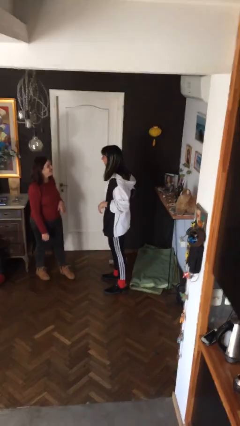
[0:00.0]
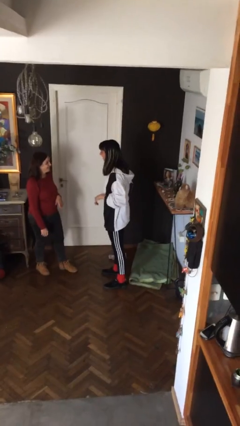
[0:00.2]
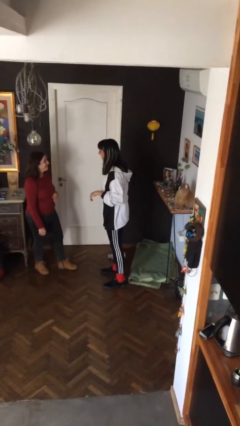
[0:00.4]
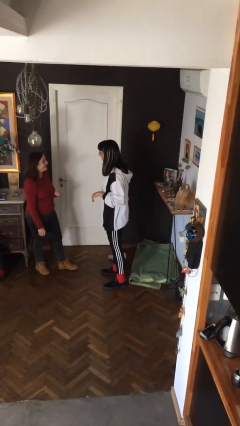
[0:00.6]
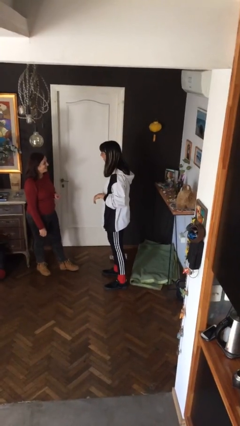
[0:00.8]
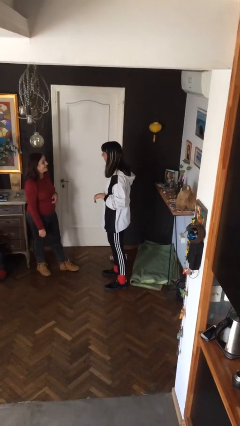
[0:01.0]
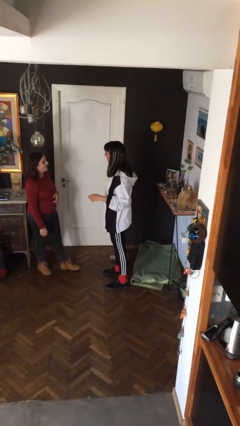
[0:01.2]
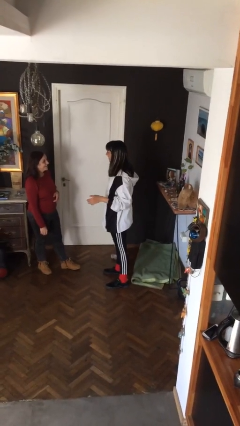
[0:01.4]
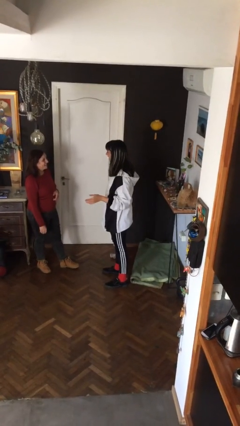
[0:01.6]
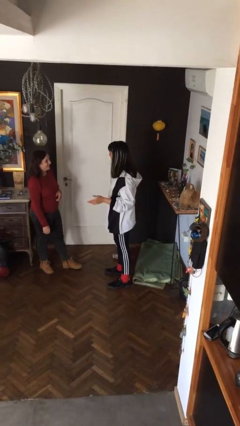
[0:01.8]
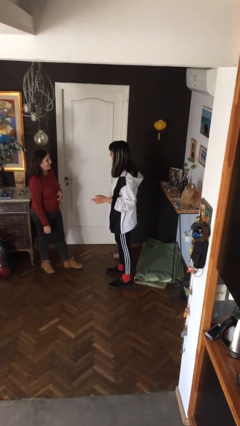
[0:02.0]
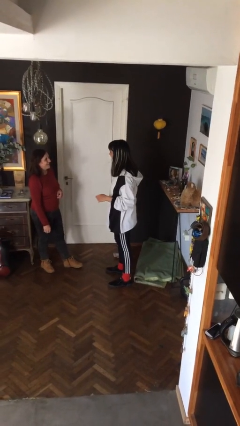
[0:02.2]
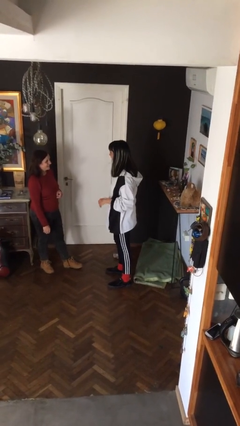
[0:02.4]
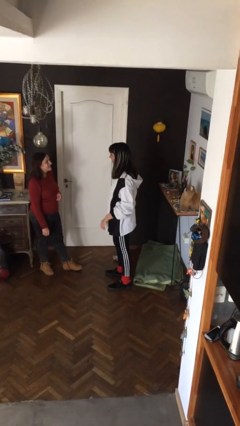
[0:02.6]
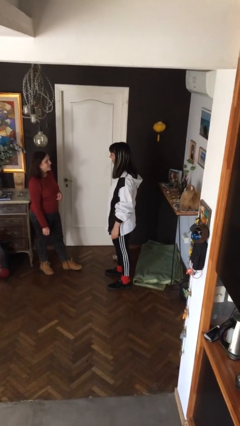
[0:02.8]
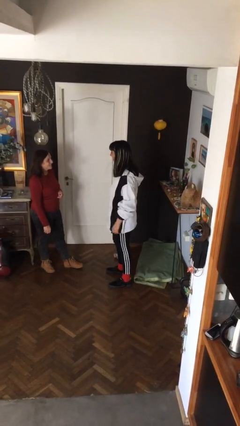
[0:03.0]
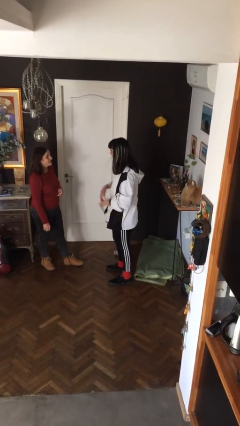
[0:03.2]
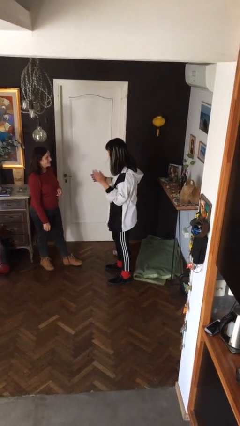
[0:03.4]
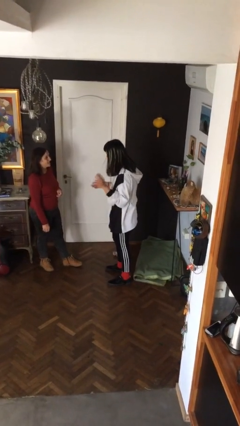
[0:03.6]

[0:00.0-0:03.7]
person talks to person

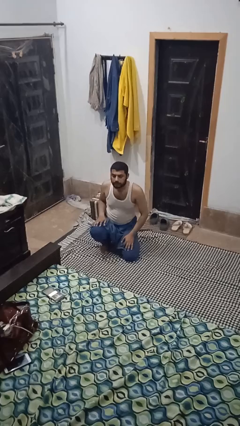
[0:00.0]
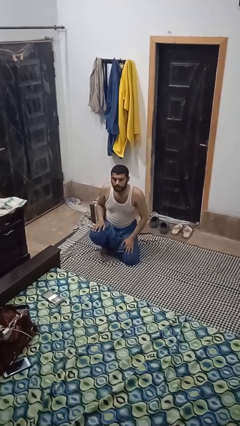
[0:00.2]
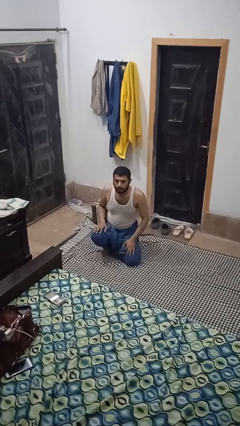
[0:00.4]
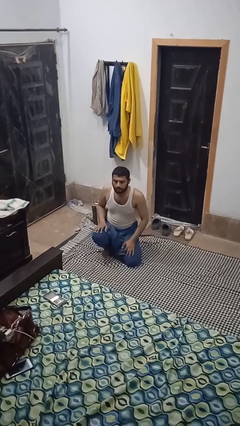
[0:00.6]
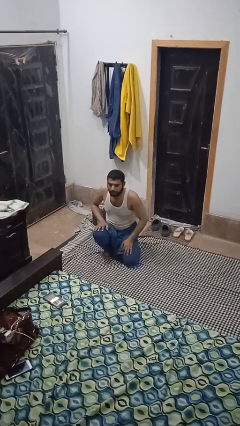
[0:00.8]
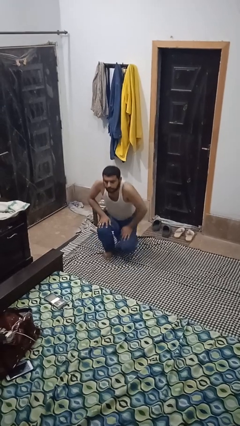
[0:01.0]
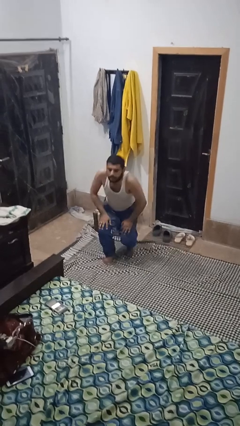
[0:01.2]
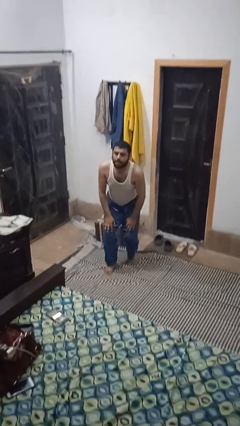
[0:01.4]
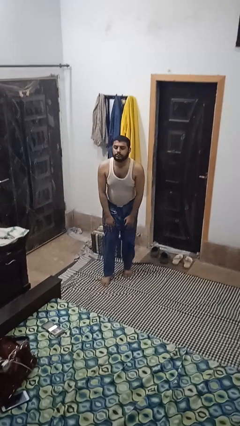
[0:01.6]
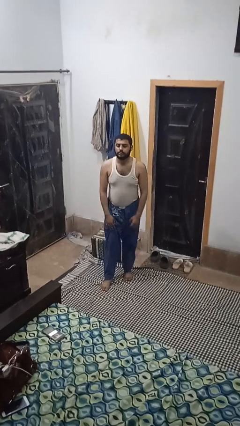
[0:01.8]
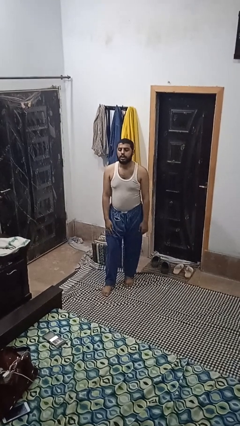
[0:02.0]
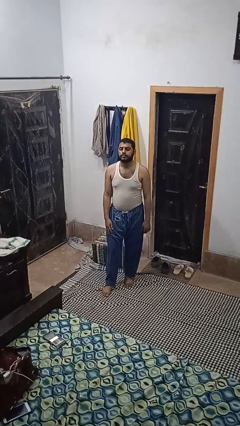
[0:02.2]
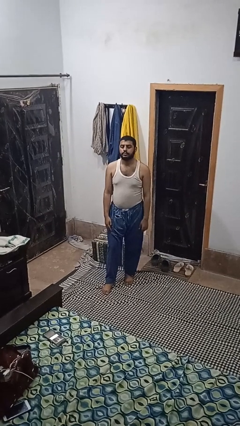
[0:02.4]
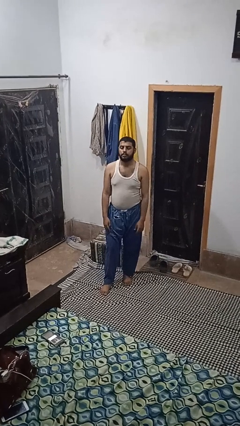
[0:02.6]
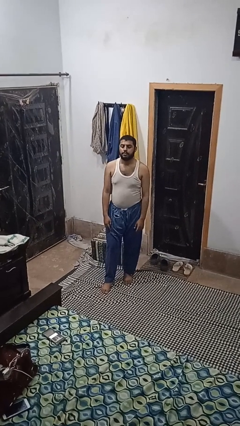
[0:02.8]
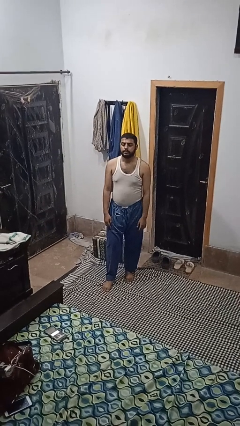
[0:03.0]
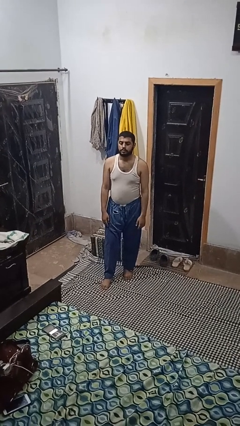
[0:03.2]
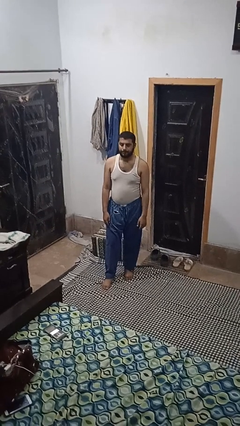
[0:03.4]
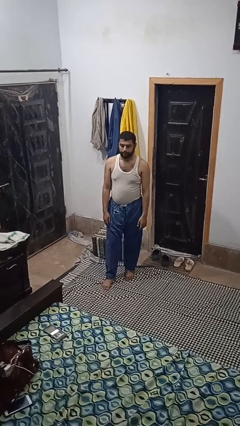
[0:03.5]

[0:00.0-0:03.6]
person stands up from floor

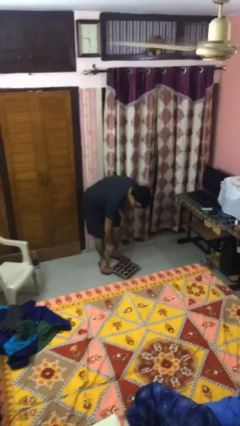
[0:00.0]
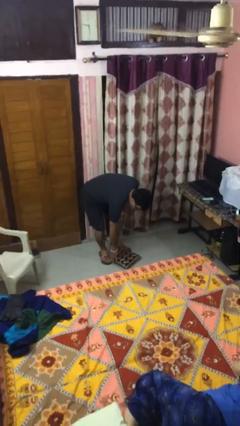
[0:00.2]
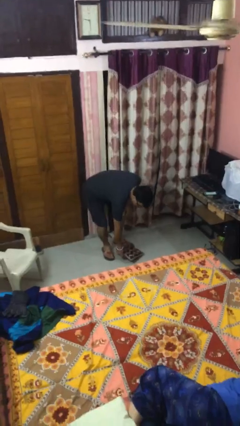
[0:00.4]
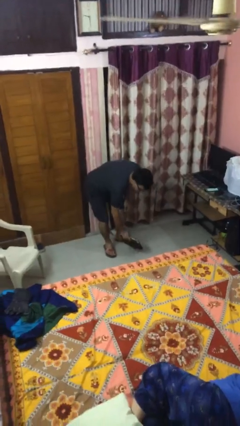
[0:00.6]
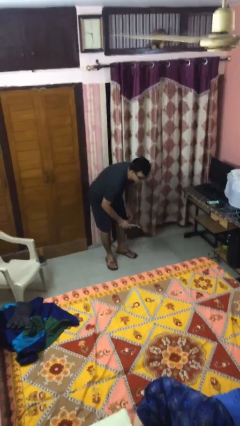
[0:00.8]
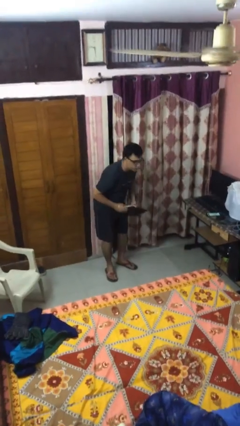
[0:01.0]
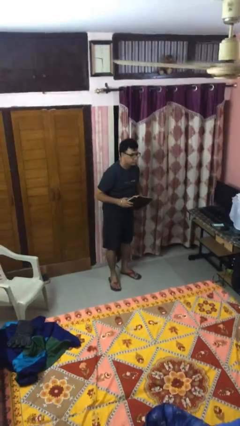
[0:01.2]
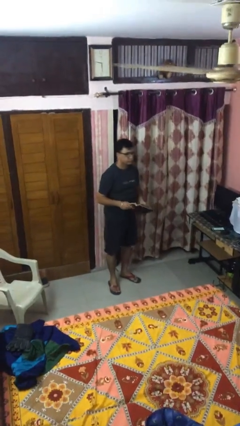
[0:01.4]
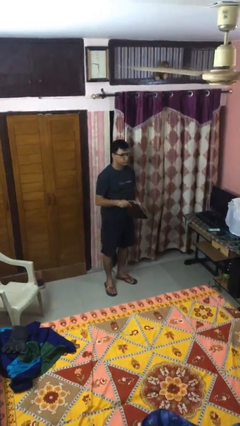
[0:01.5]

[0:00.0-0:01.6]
person picks up object from floor

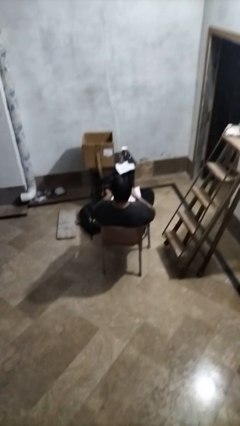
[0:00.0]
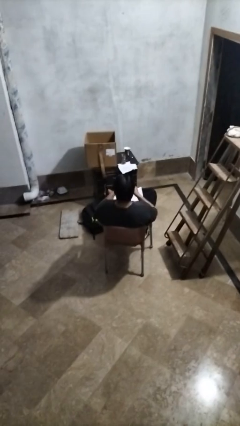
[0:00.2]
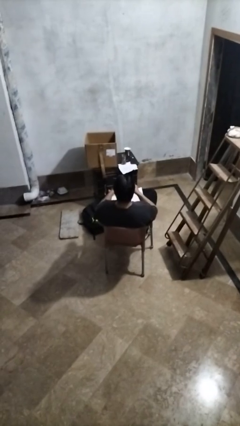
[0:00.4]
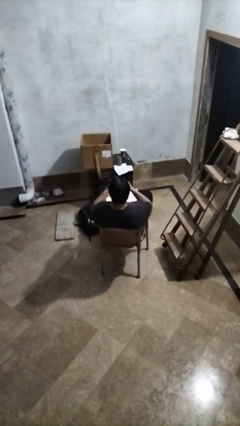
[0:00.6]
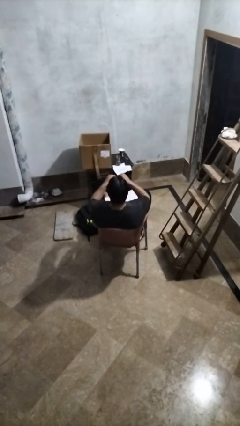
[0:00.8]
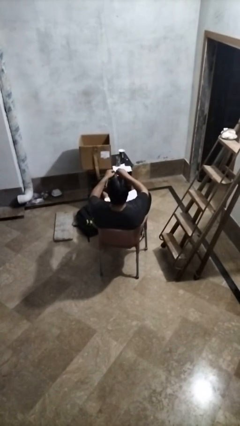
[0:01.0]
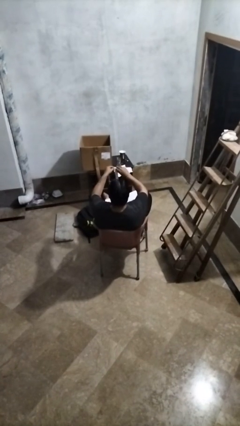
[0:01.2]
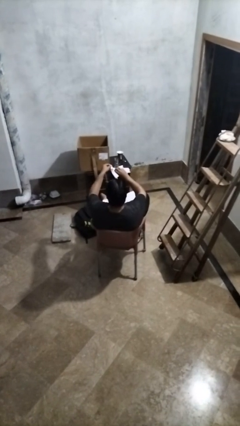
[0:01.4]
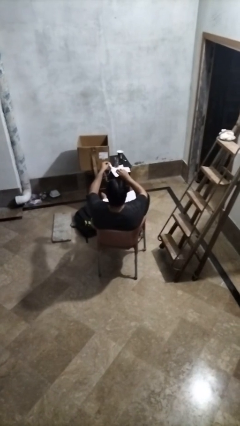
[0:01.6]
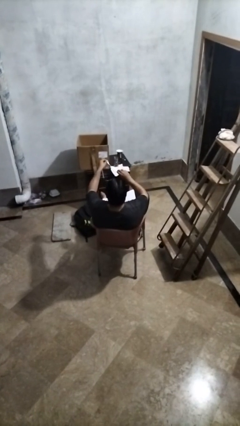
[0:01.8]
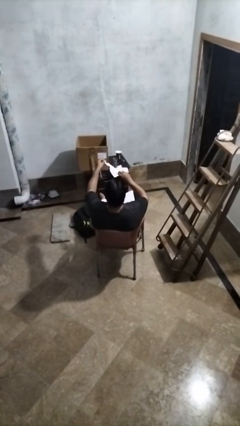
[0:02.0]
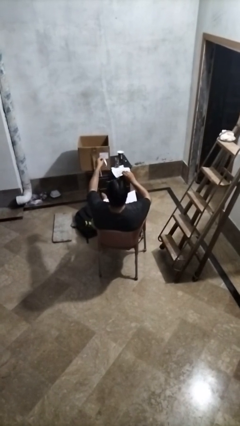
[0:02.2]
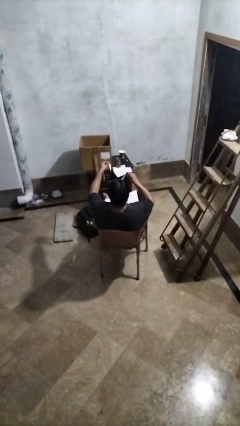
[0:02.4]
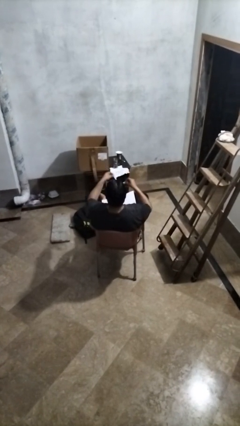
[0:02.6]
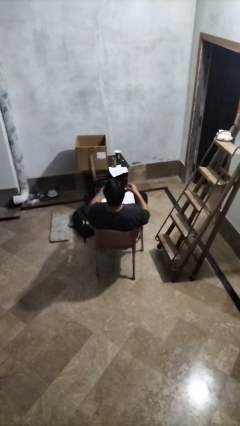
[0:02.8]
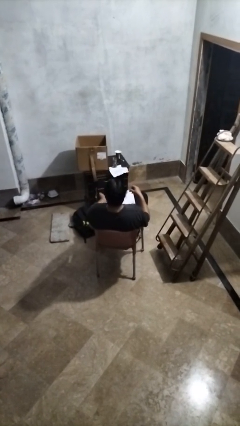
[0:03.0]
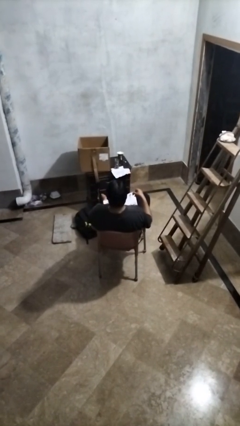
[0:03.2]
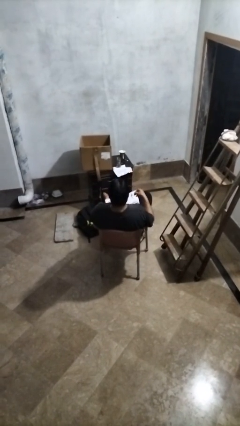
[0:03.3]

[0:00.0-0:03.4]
person tears paper

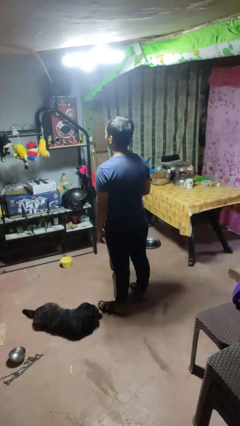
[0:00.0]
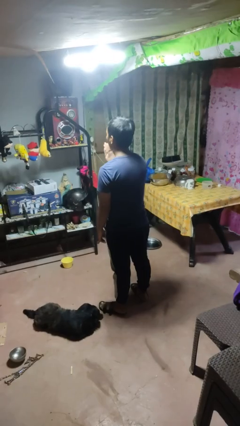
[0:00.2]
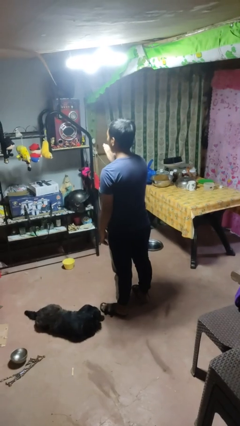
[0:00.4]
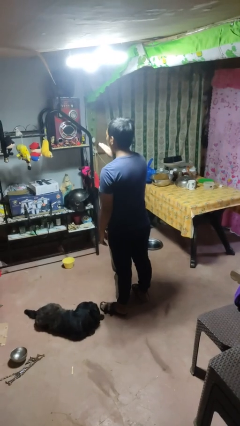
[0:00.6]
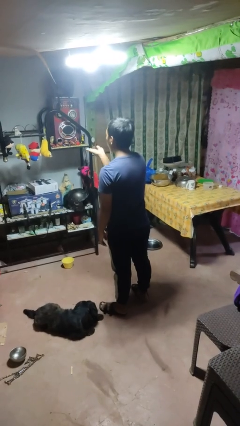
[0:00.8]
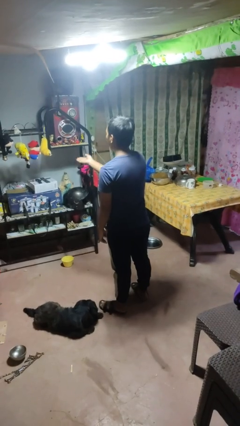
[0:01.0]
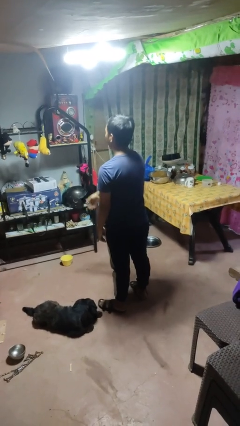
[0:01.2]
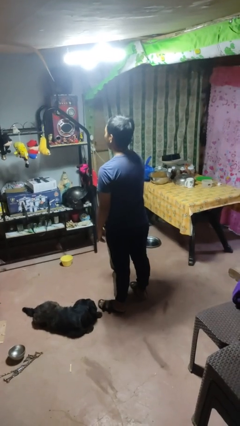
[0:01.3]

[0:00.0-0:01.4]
person gestures blow kiss

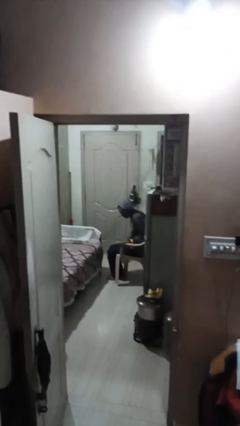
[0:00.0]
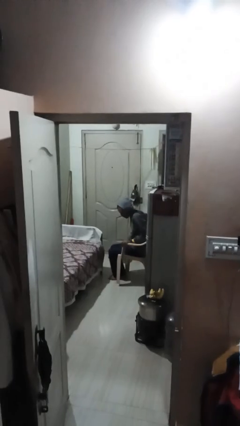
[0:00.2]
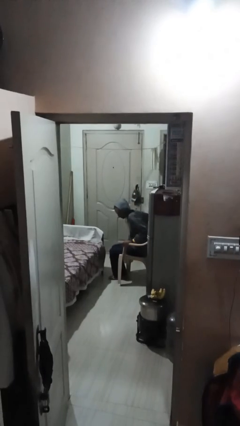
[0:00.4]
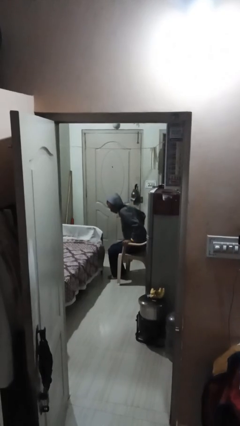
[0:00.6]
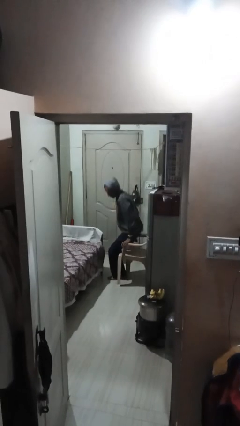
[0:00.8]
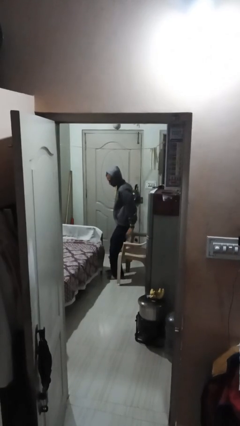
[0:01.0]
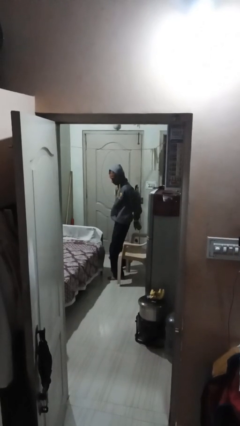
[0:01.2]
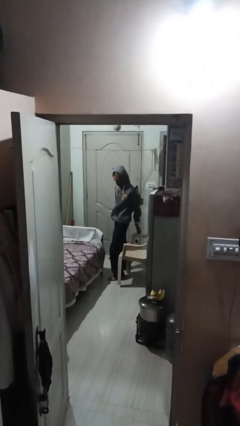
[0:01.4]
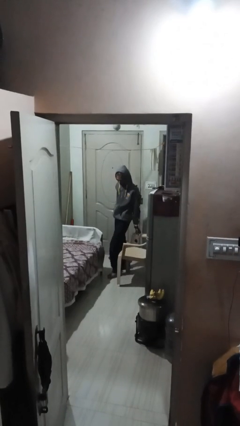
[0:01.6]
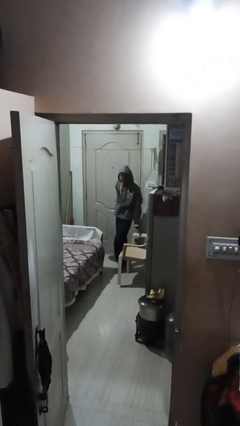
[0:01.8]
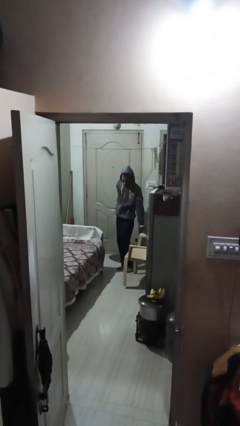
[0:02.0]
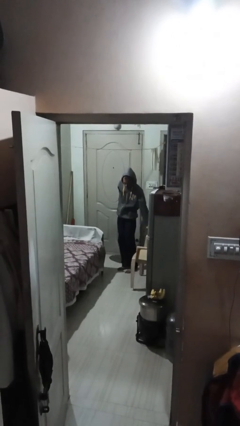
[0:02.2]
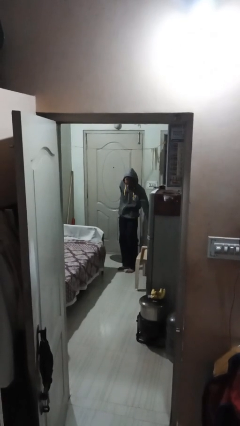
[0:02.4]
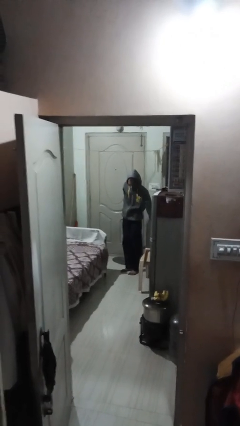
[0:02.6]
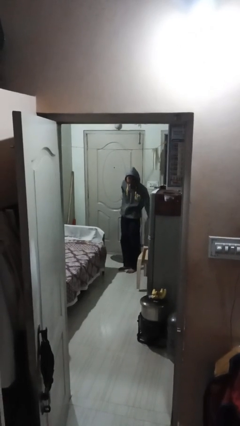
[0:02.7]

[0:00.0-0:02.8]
person stands up

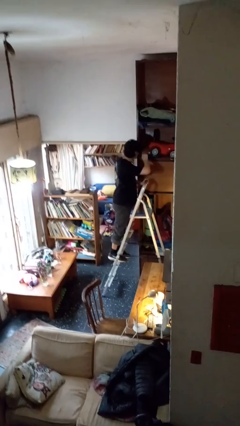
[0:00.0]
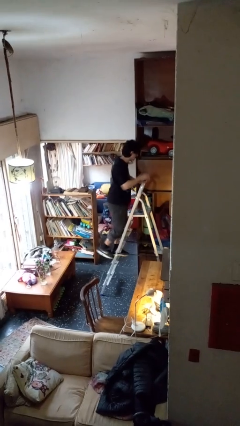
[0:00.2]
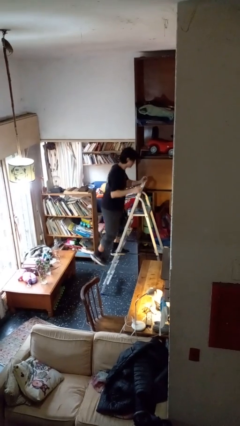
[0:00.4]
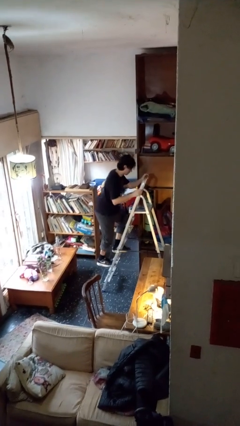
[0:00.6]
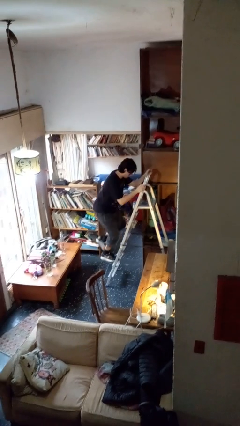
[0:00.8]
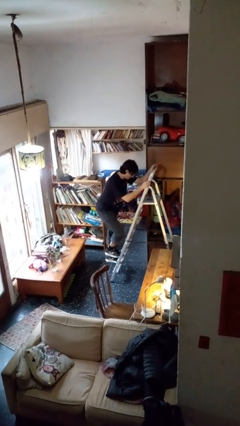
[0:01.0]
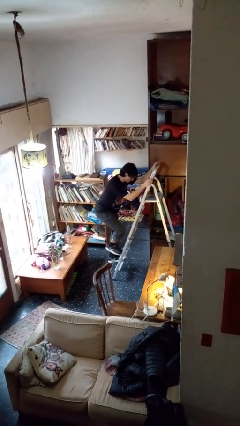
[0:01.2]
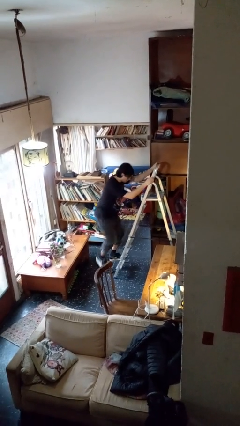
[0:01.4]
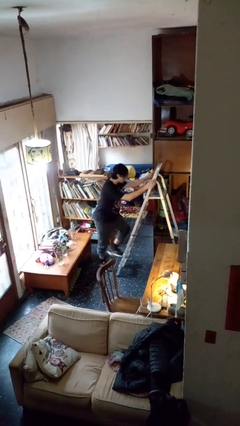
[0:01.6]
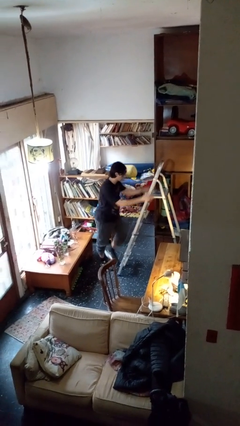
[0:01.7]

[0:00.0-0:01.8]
person climbs down ladder
